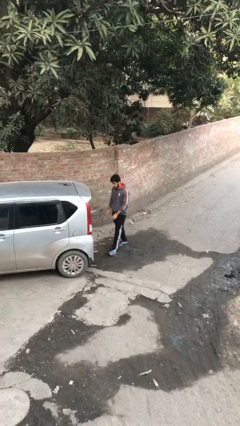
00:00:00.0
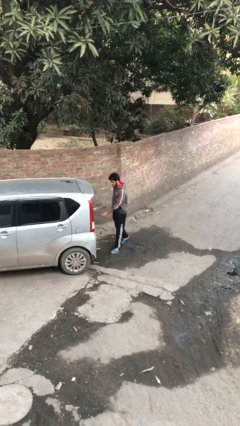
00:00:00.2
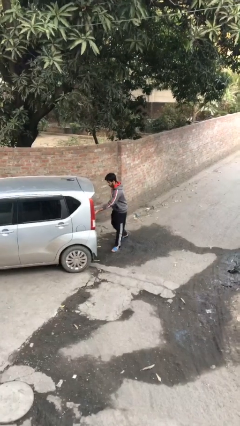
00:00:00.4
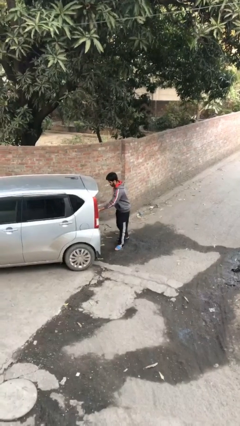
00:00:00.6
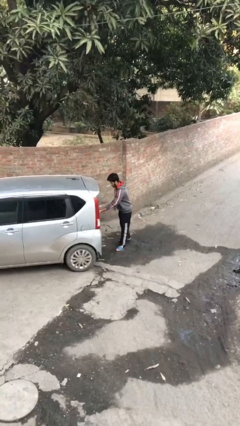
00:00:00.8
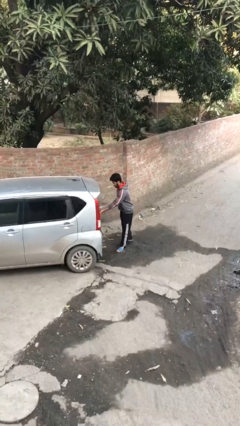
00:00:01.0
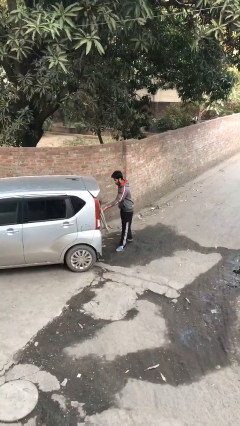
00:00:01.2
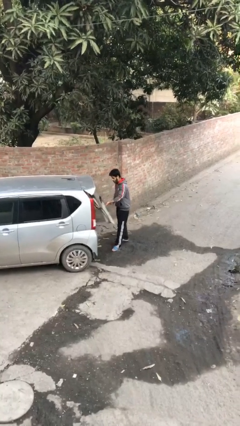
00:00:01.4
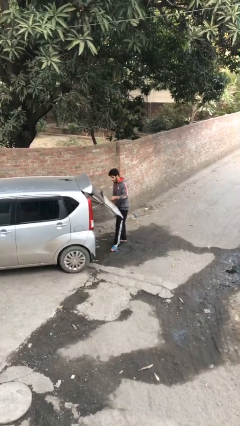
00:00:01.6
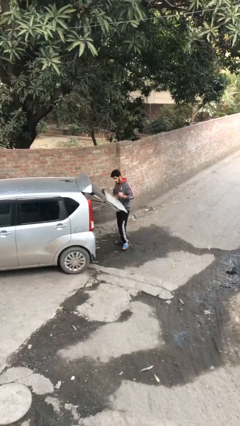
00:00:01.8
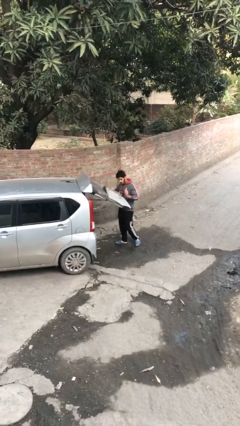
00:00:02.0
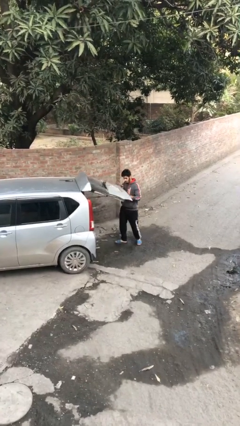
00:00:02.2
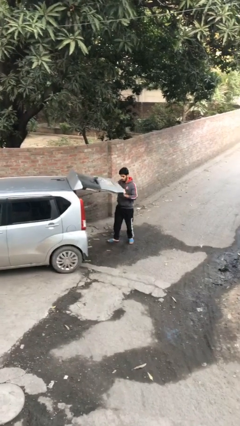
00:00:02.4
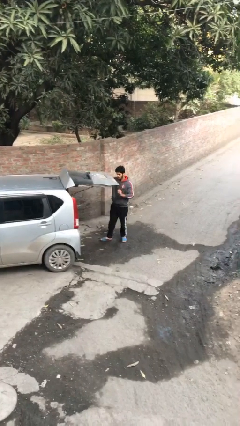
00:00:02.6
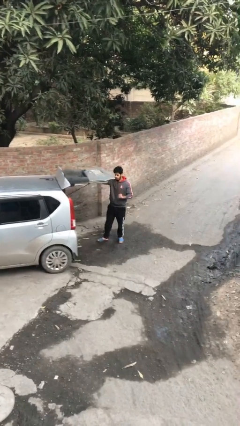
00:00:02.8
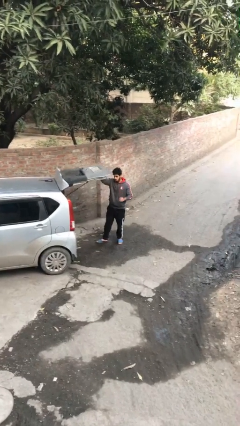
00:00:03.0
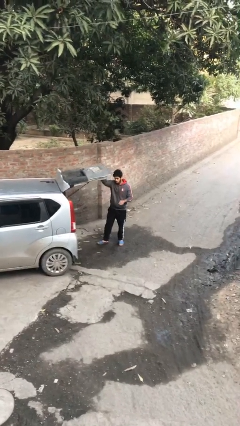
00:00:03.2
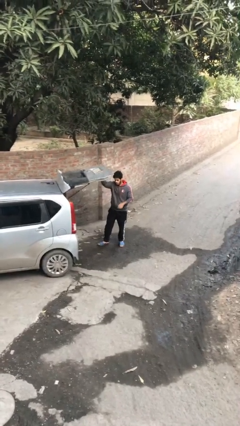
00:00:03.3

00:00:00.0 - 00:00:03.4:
person opens car trunk

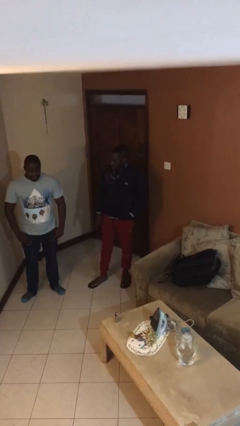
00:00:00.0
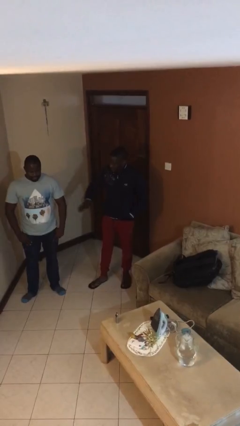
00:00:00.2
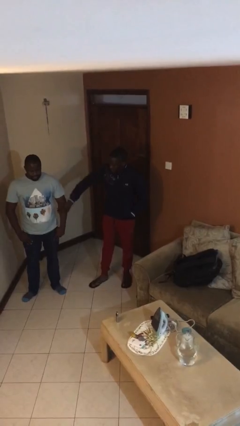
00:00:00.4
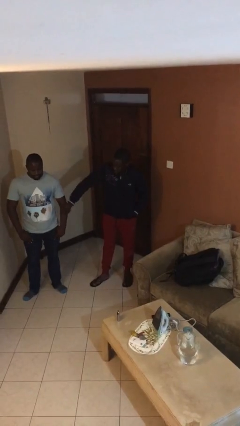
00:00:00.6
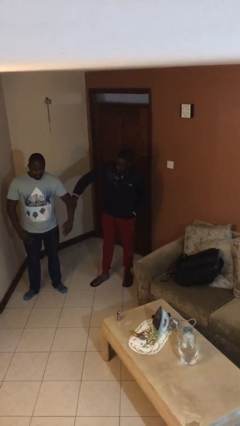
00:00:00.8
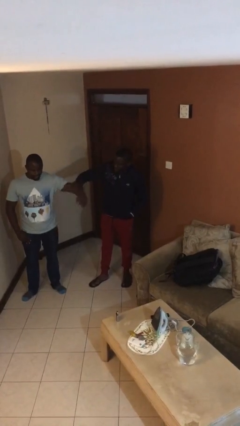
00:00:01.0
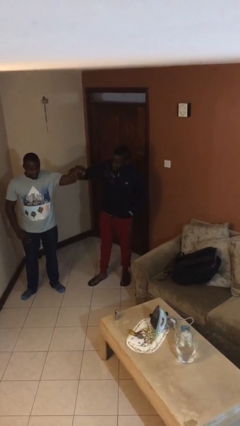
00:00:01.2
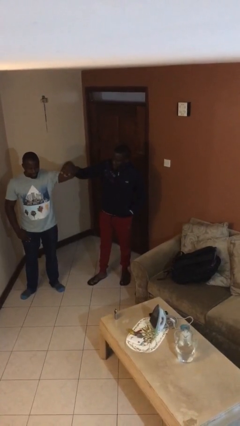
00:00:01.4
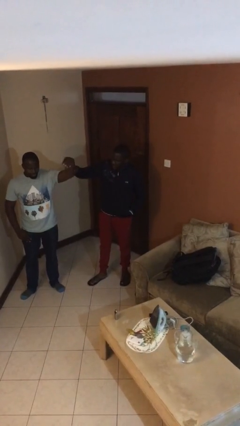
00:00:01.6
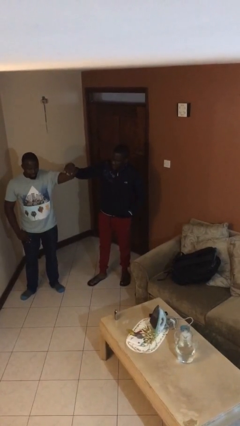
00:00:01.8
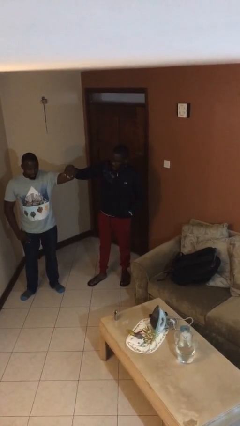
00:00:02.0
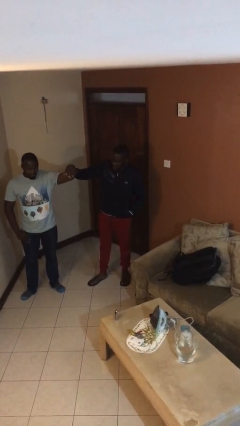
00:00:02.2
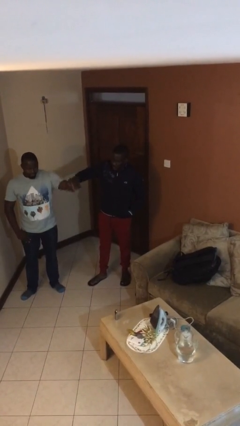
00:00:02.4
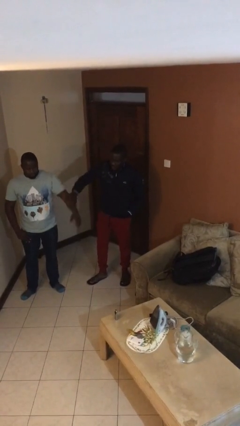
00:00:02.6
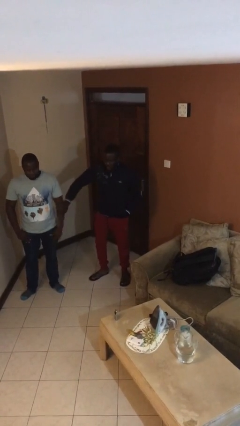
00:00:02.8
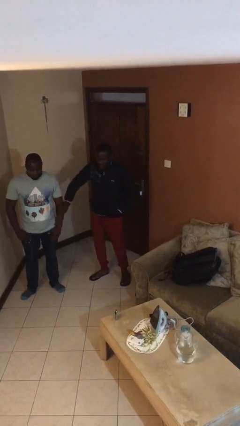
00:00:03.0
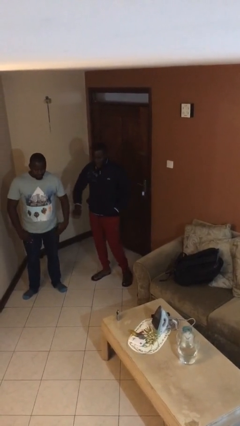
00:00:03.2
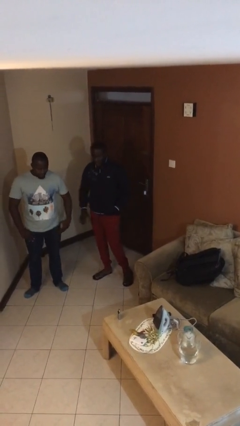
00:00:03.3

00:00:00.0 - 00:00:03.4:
person grabs person by forearm

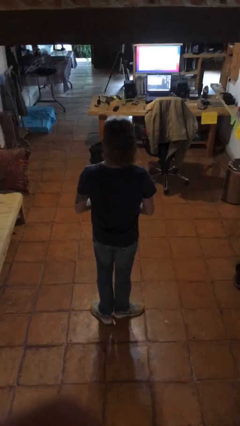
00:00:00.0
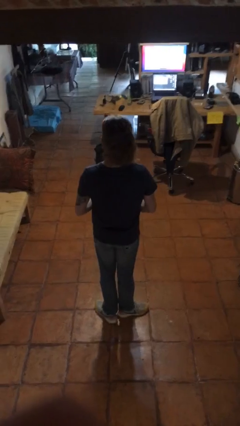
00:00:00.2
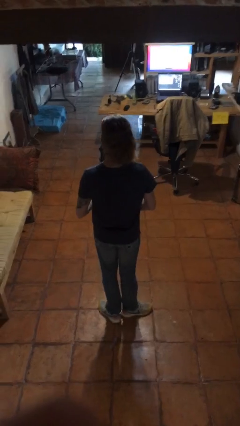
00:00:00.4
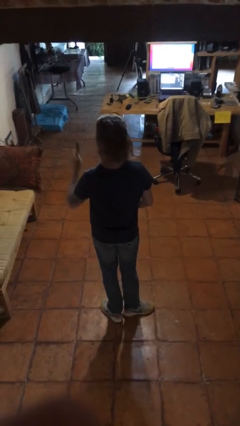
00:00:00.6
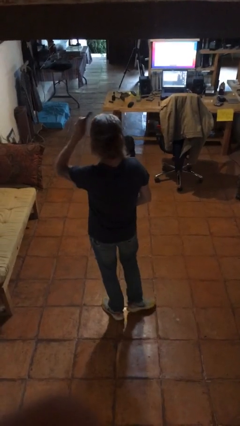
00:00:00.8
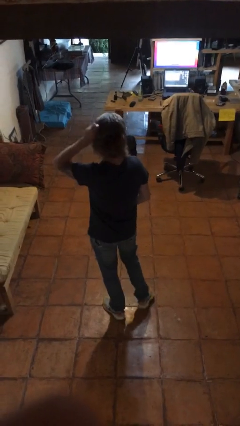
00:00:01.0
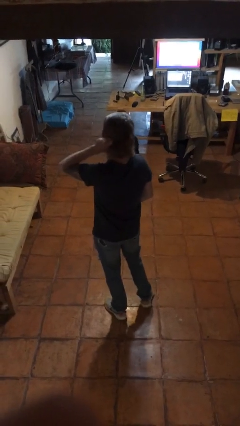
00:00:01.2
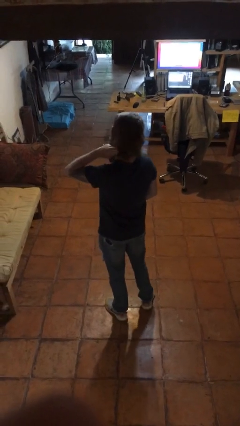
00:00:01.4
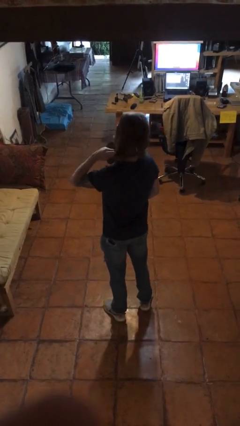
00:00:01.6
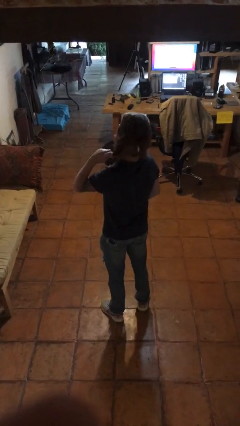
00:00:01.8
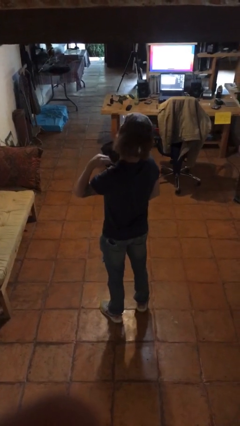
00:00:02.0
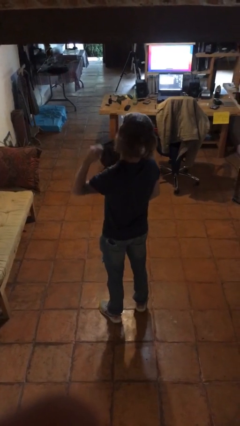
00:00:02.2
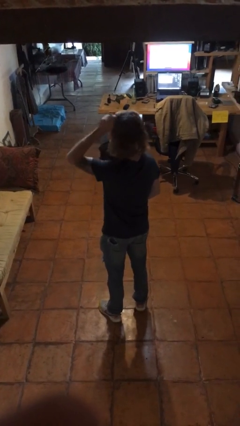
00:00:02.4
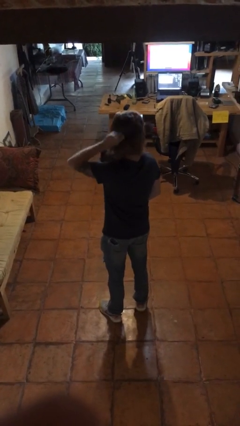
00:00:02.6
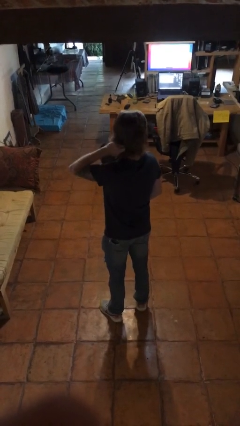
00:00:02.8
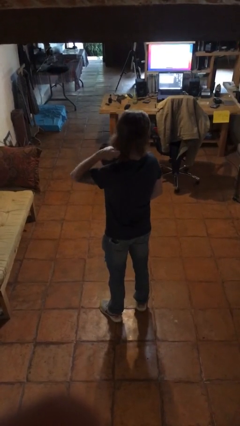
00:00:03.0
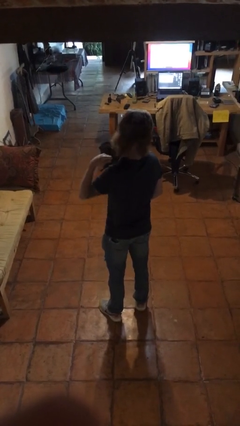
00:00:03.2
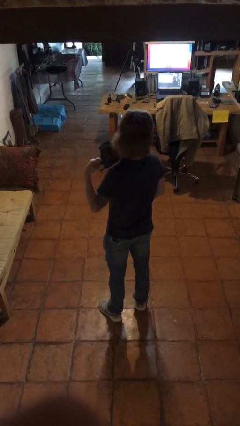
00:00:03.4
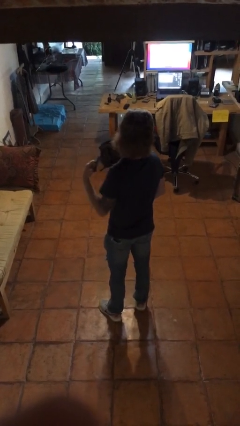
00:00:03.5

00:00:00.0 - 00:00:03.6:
person brushes hair

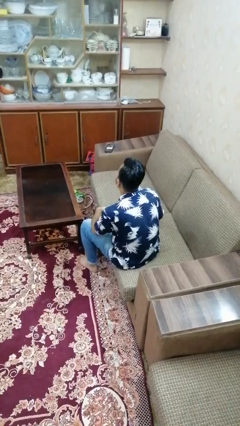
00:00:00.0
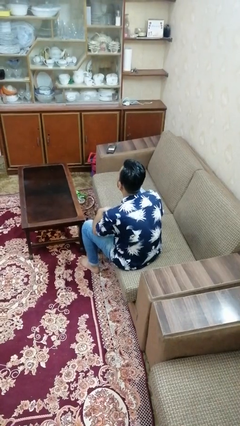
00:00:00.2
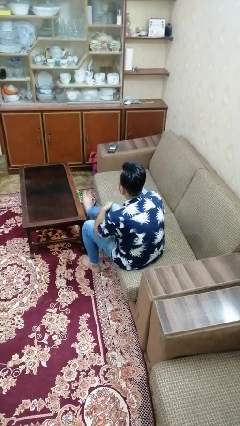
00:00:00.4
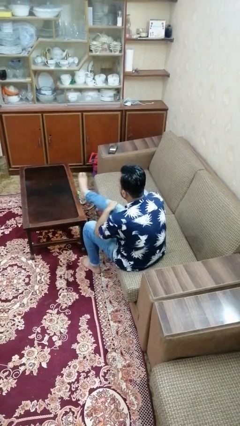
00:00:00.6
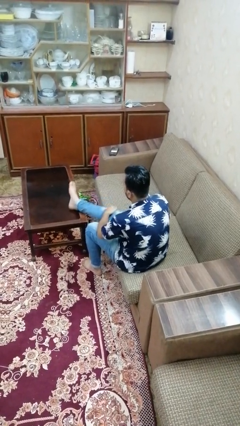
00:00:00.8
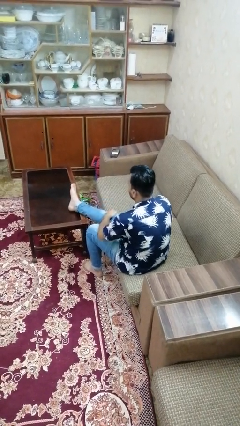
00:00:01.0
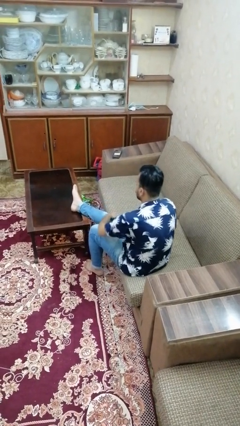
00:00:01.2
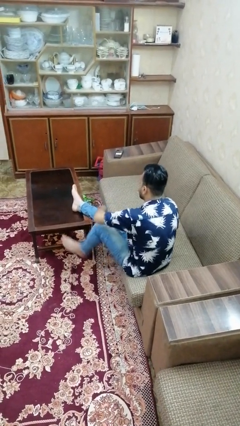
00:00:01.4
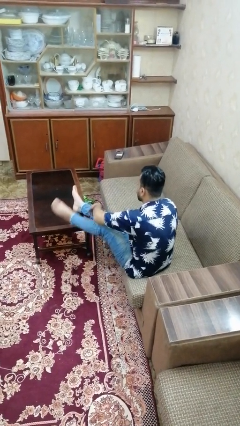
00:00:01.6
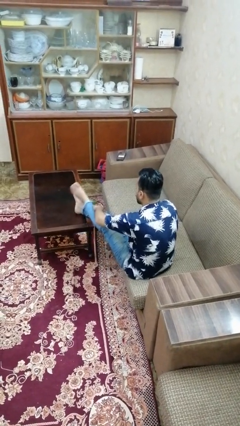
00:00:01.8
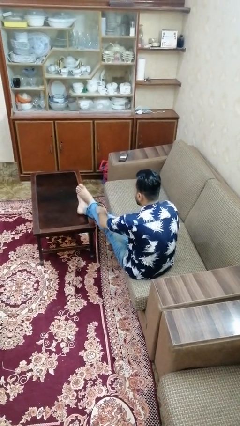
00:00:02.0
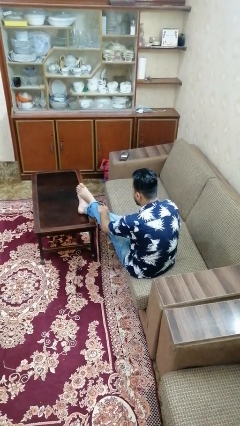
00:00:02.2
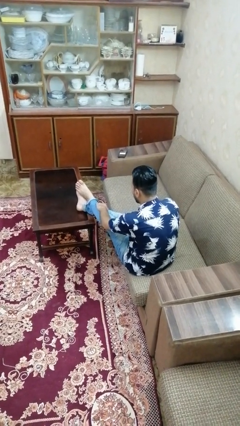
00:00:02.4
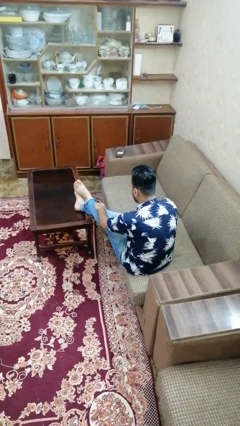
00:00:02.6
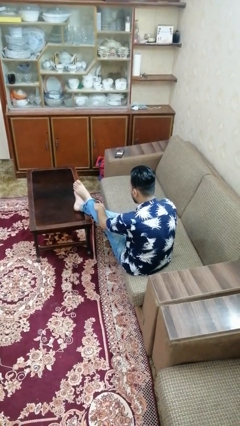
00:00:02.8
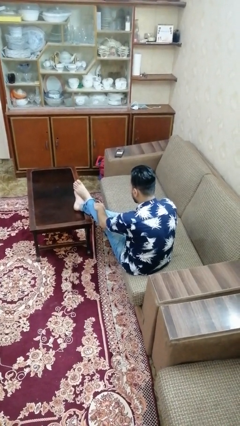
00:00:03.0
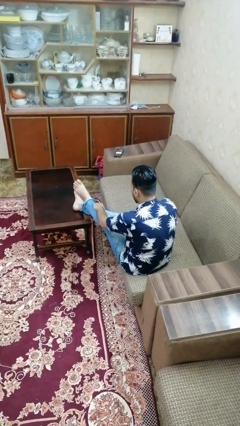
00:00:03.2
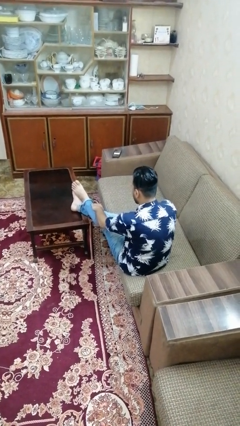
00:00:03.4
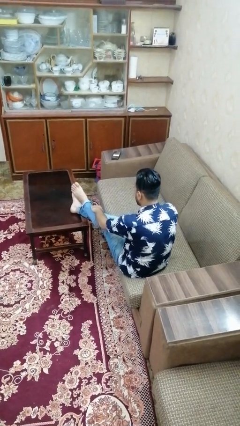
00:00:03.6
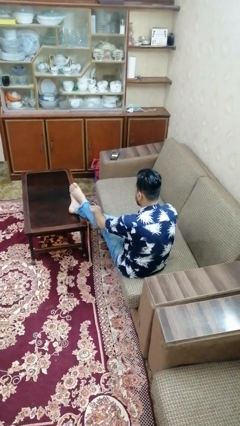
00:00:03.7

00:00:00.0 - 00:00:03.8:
person puts feet up

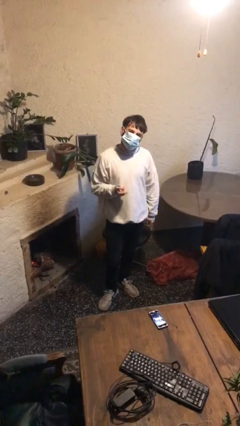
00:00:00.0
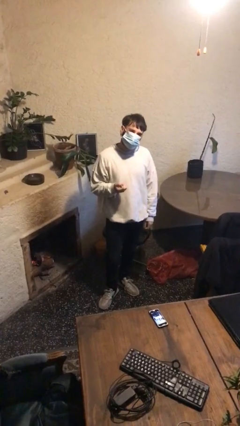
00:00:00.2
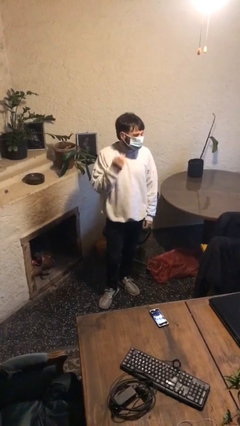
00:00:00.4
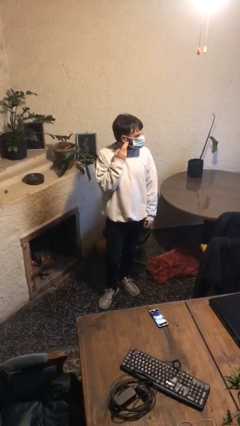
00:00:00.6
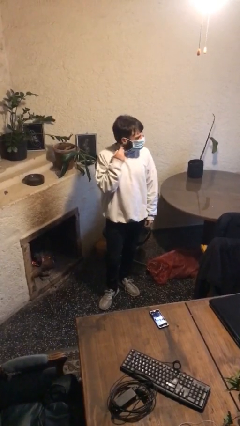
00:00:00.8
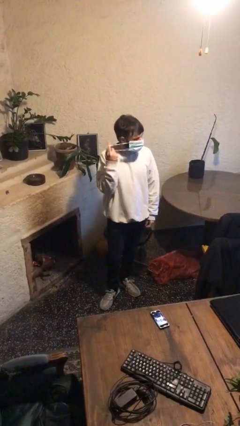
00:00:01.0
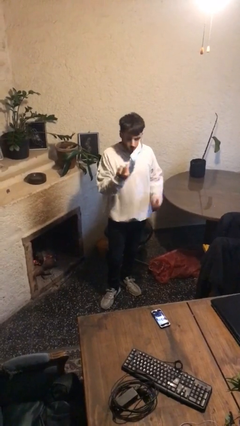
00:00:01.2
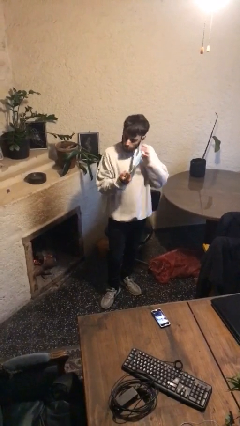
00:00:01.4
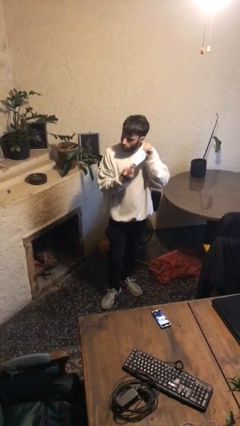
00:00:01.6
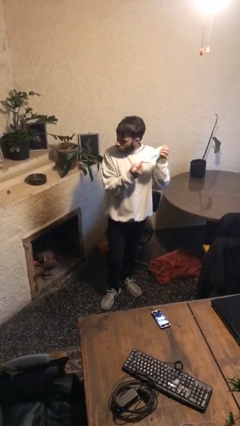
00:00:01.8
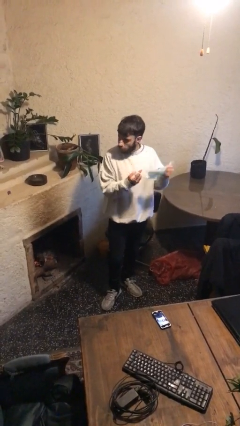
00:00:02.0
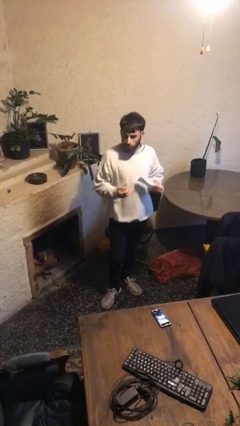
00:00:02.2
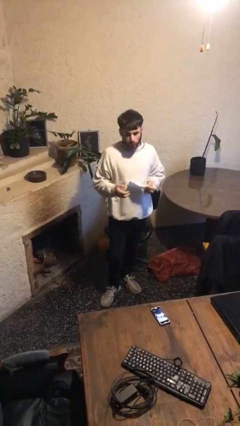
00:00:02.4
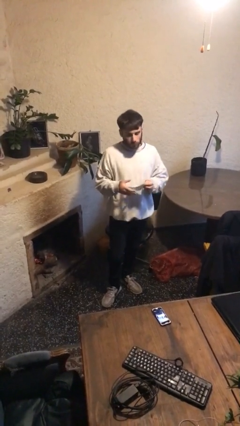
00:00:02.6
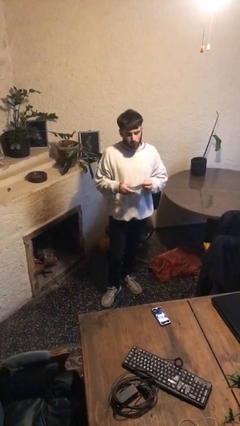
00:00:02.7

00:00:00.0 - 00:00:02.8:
person takes off facemask

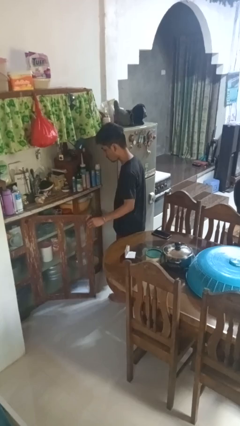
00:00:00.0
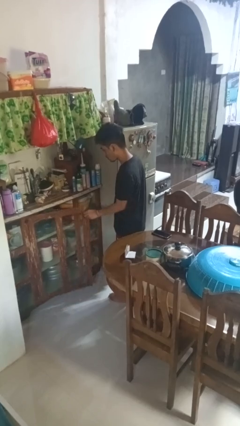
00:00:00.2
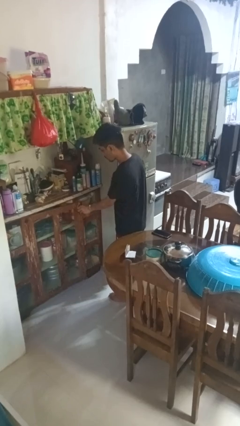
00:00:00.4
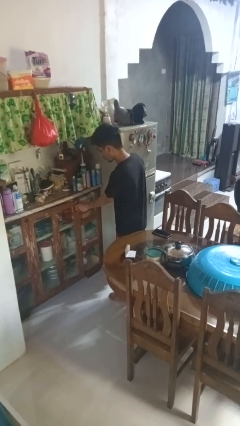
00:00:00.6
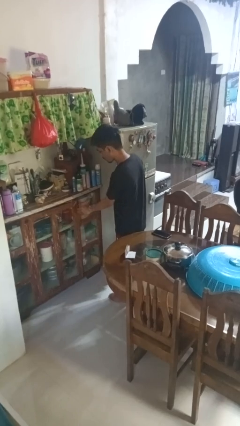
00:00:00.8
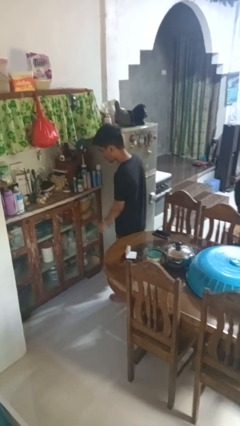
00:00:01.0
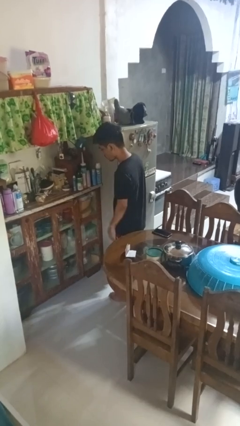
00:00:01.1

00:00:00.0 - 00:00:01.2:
person closes cabinet
